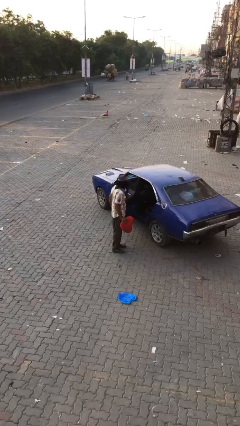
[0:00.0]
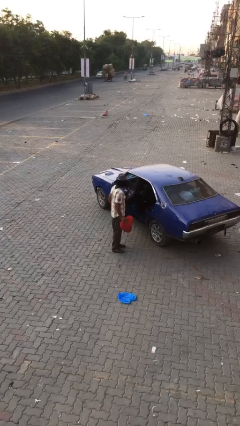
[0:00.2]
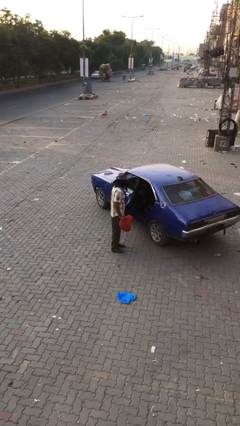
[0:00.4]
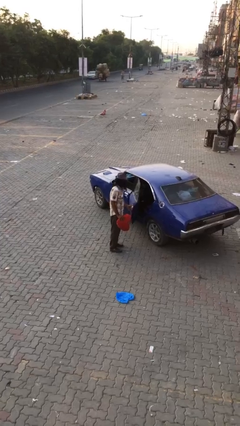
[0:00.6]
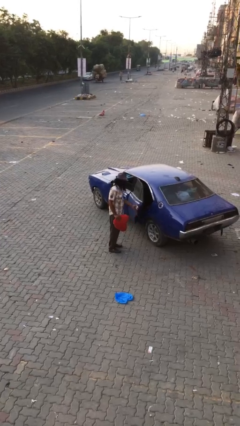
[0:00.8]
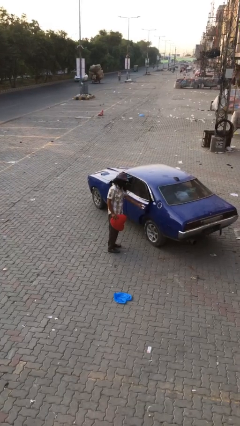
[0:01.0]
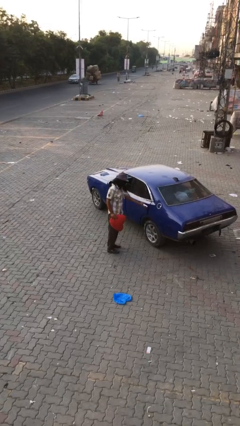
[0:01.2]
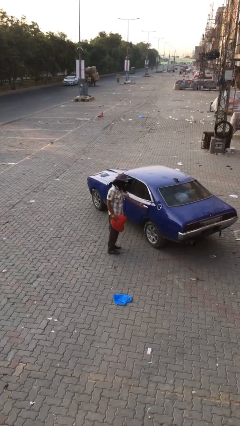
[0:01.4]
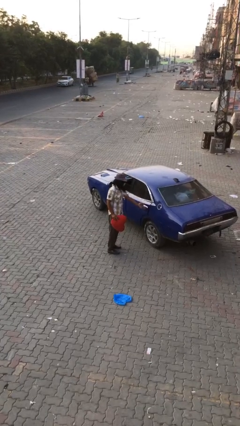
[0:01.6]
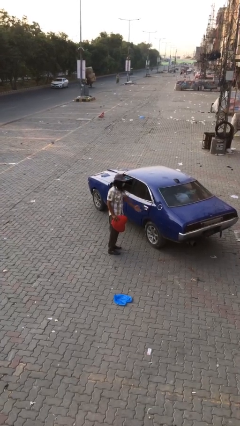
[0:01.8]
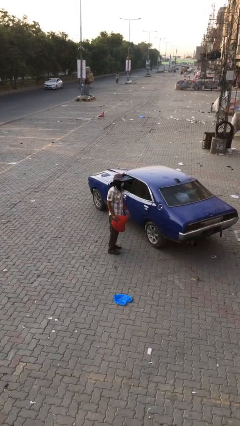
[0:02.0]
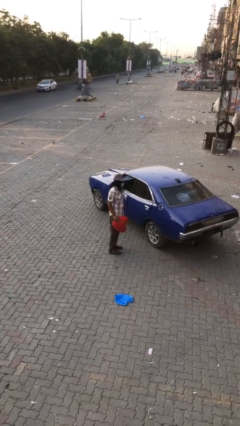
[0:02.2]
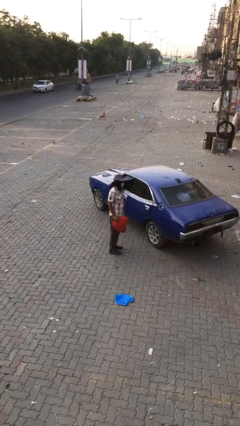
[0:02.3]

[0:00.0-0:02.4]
person closes car door

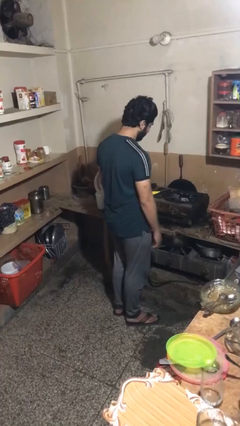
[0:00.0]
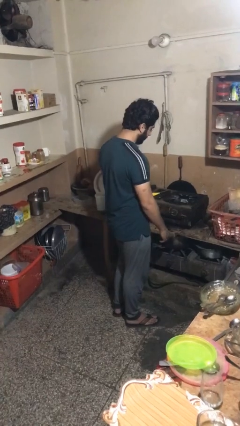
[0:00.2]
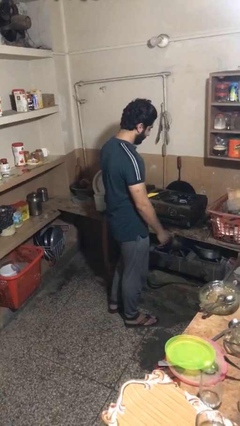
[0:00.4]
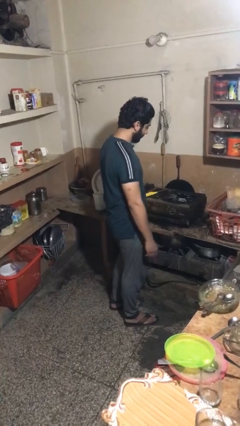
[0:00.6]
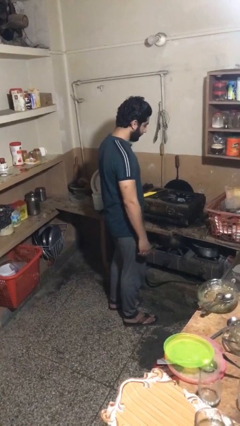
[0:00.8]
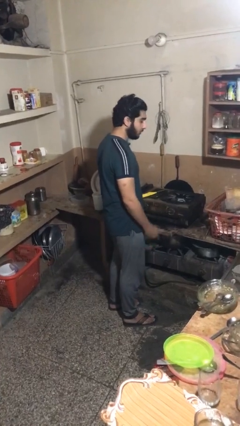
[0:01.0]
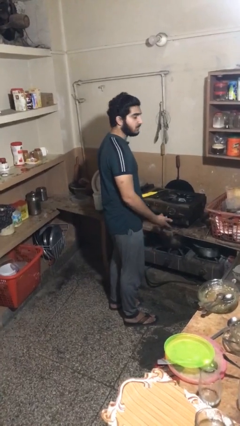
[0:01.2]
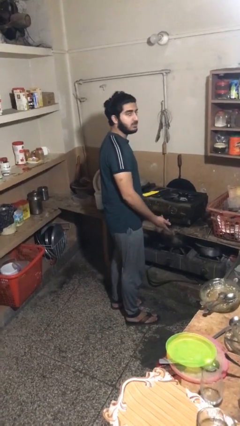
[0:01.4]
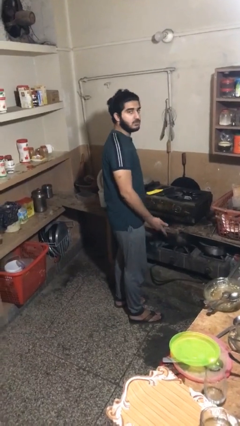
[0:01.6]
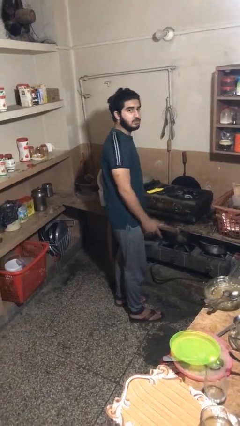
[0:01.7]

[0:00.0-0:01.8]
person turns on stovetop

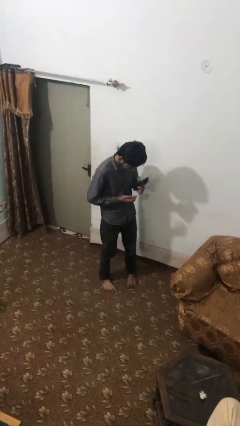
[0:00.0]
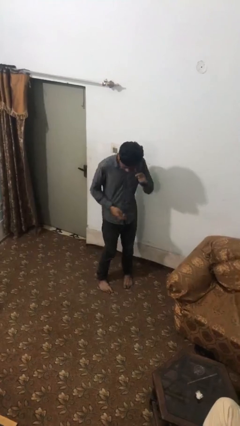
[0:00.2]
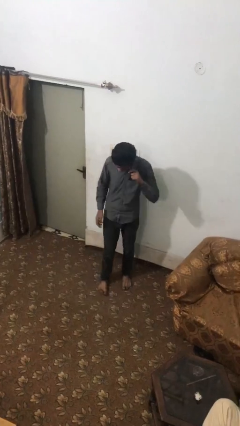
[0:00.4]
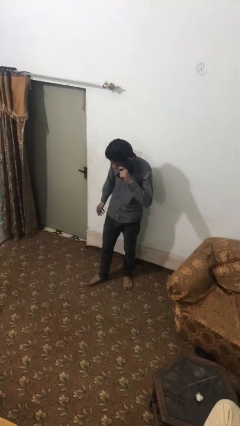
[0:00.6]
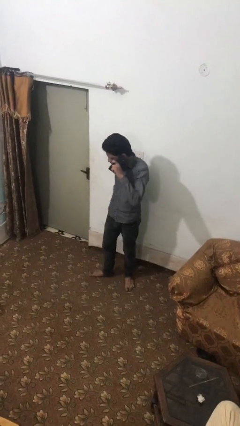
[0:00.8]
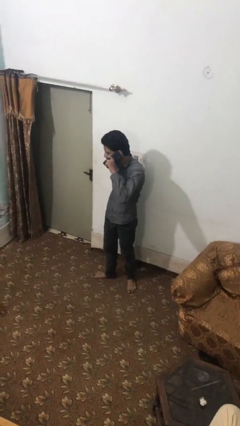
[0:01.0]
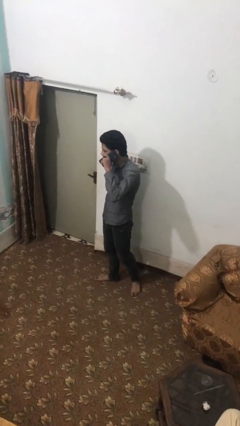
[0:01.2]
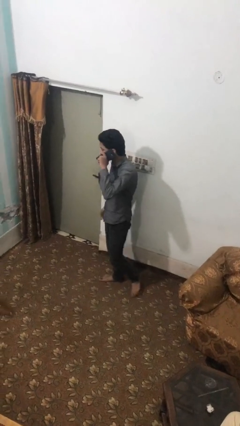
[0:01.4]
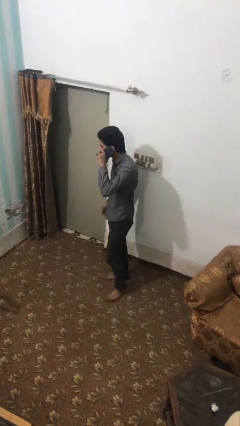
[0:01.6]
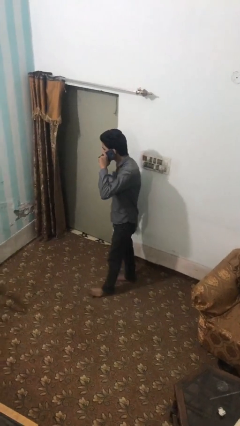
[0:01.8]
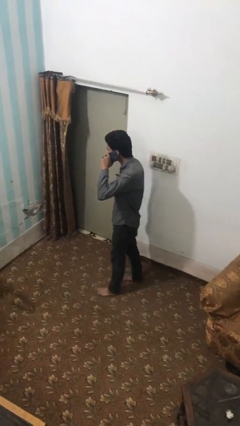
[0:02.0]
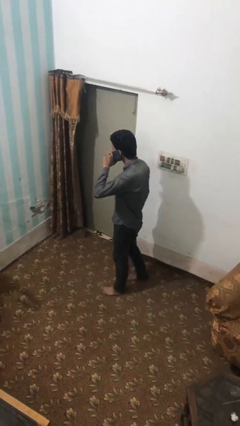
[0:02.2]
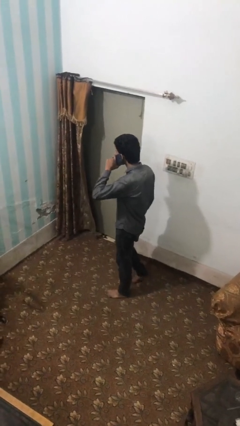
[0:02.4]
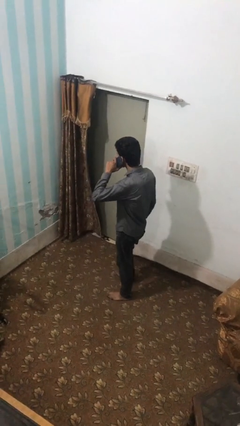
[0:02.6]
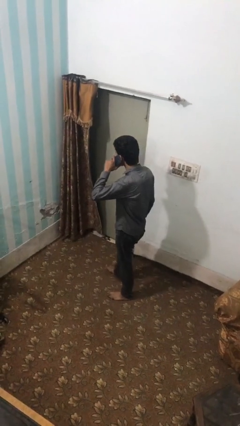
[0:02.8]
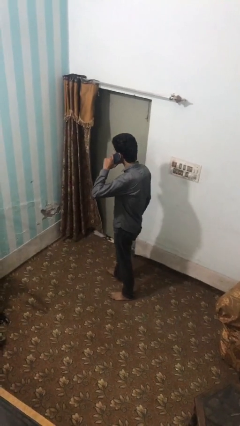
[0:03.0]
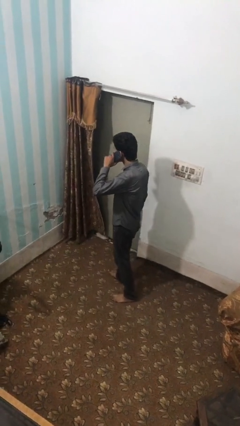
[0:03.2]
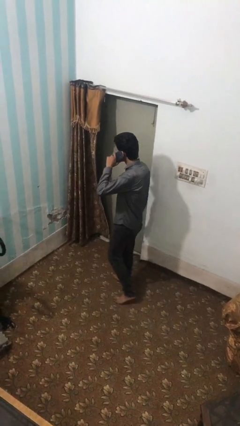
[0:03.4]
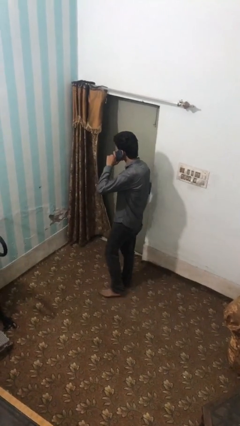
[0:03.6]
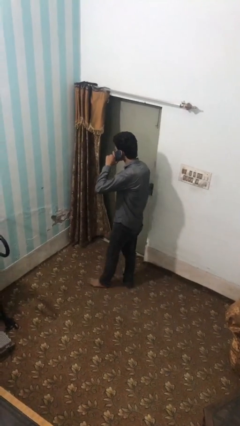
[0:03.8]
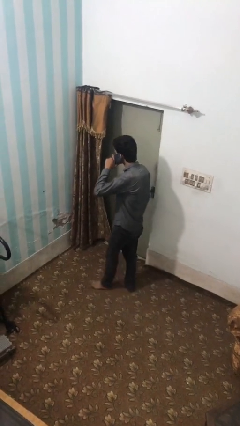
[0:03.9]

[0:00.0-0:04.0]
person talks on phone

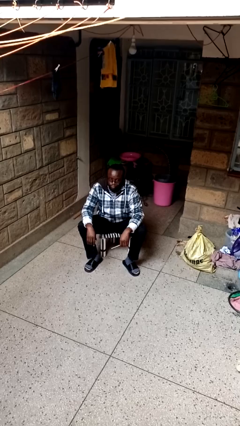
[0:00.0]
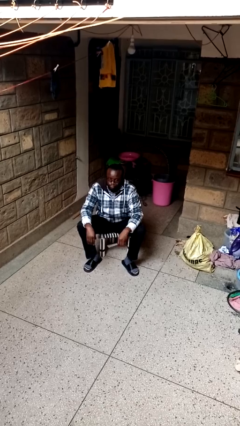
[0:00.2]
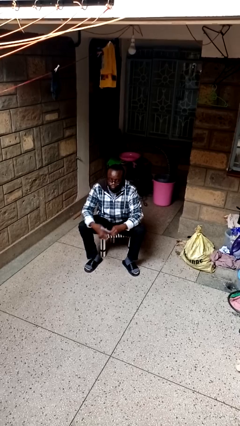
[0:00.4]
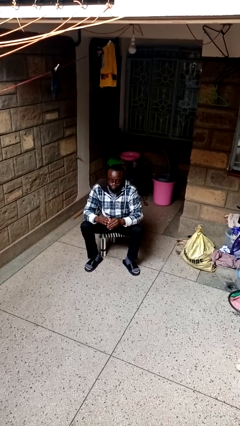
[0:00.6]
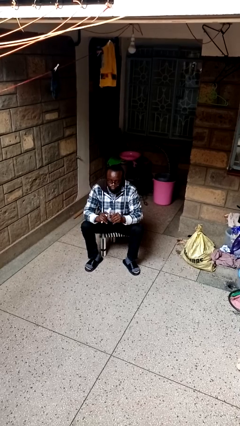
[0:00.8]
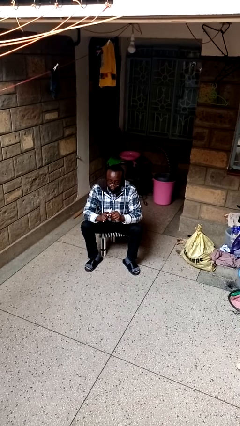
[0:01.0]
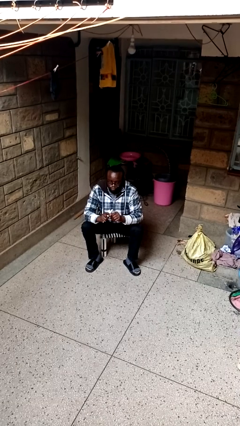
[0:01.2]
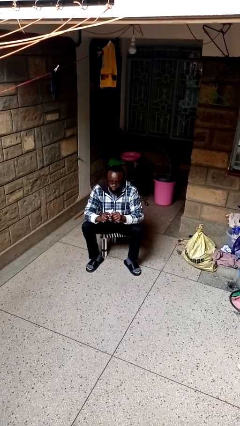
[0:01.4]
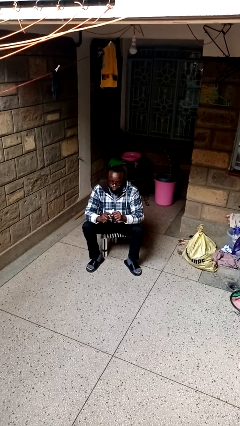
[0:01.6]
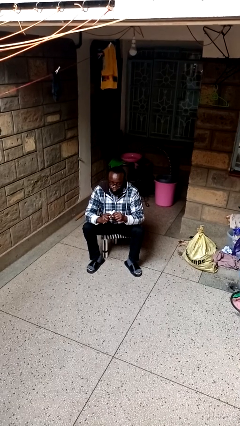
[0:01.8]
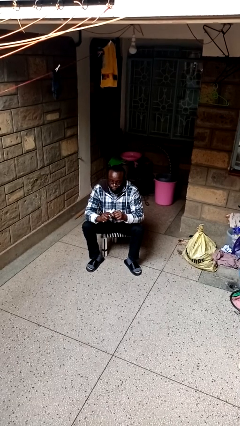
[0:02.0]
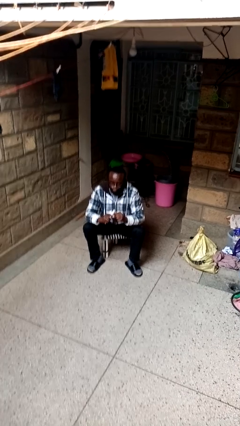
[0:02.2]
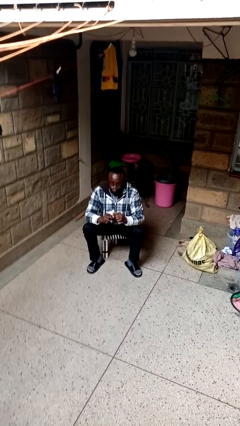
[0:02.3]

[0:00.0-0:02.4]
person files fingernails

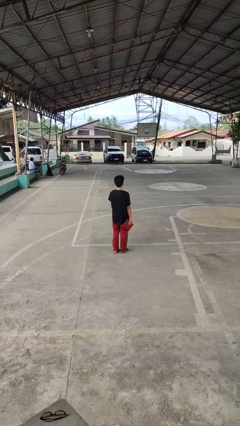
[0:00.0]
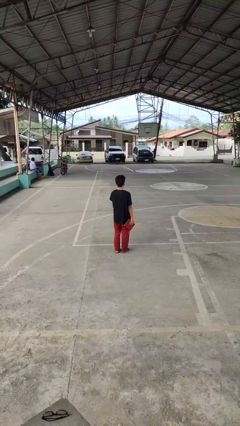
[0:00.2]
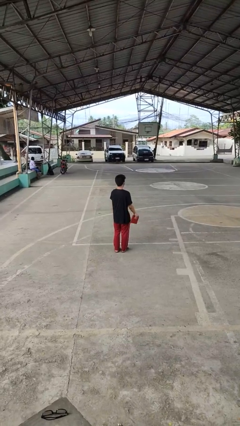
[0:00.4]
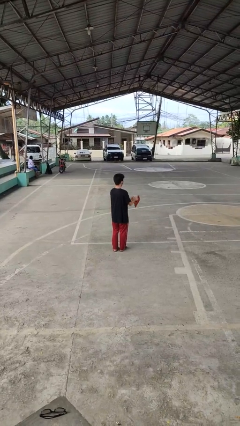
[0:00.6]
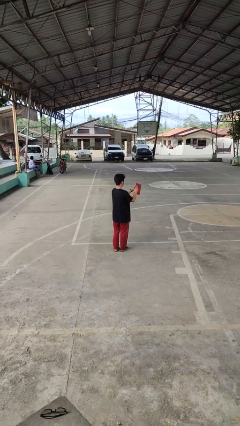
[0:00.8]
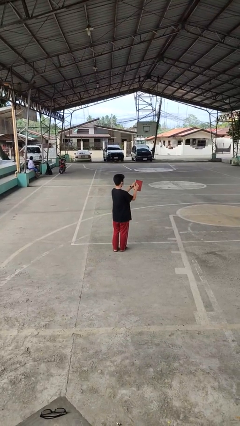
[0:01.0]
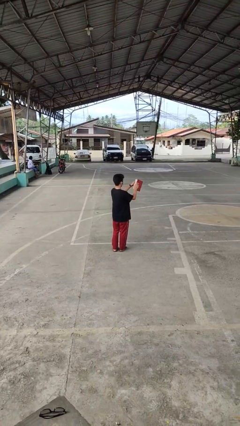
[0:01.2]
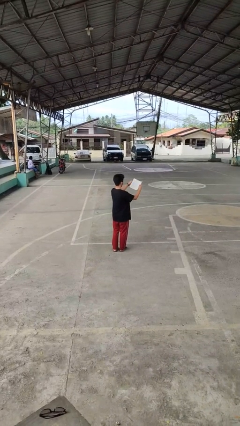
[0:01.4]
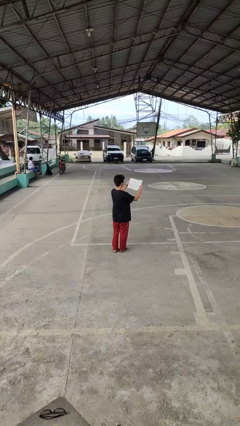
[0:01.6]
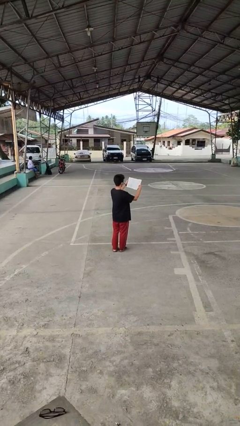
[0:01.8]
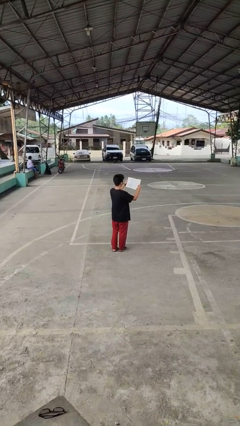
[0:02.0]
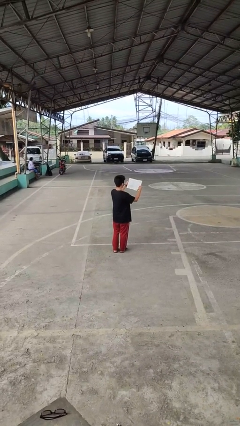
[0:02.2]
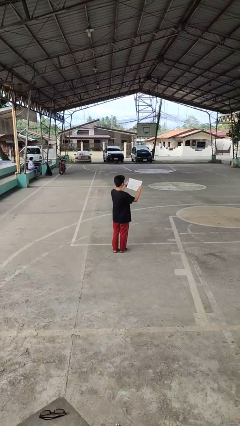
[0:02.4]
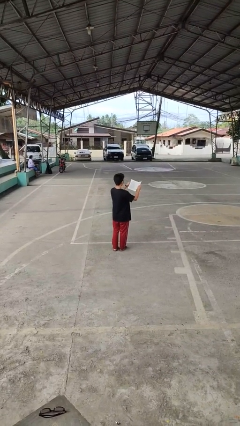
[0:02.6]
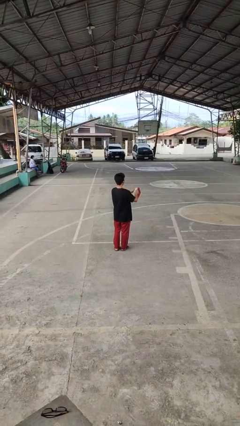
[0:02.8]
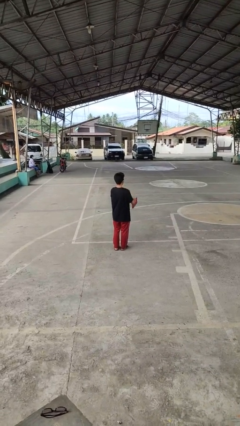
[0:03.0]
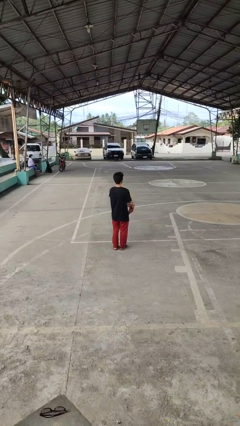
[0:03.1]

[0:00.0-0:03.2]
person reads book

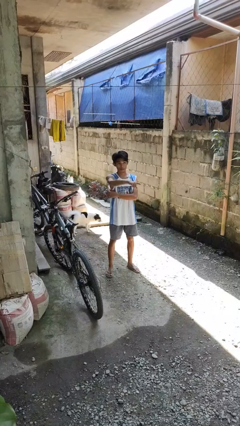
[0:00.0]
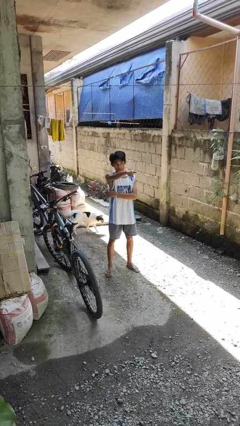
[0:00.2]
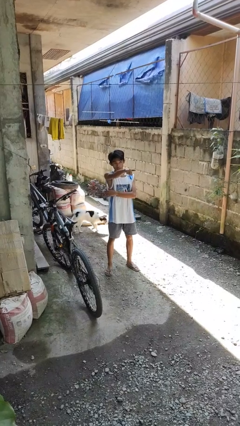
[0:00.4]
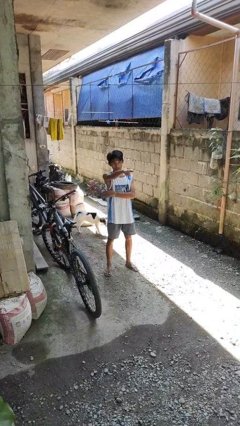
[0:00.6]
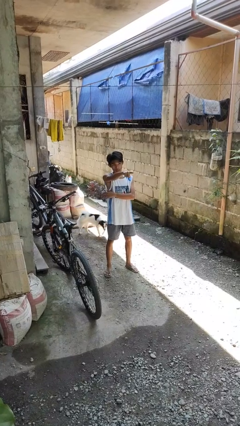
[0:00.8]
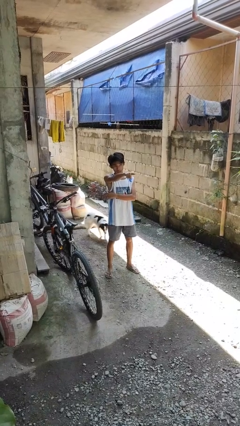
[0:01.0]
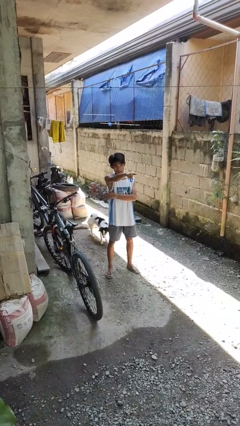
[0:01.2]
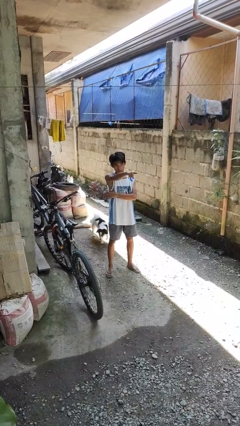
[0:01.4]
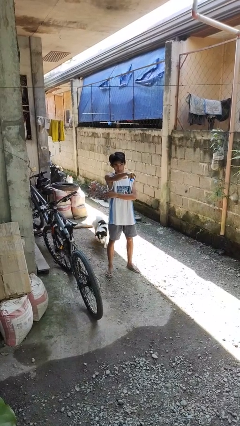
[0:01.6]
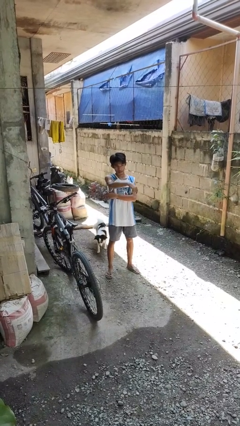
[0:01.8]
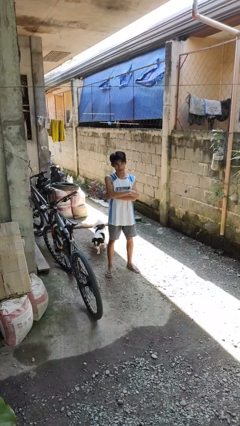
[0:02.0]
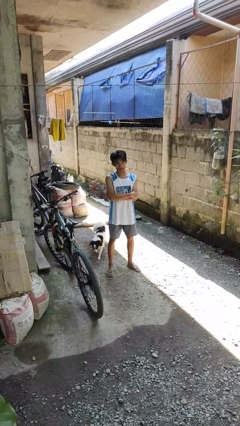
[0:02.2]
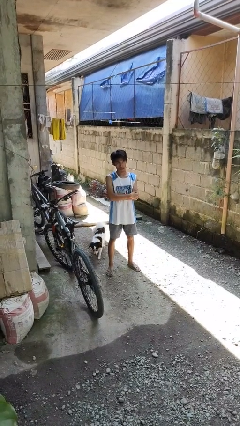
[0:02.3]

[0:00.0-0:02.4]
person points at person

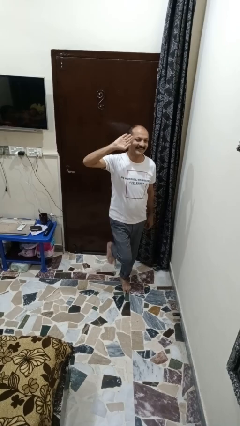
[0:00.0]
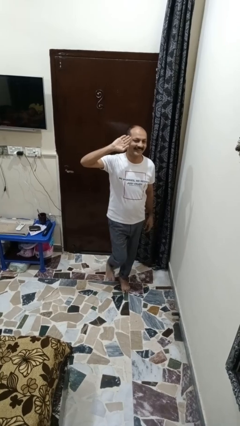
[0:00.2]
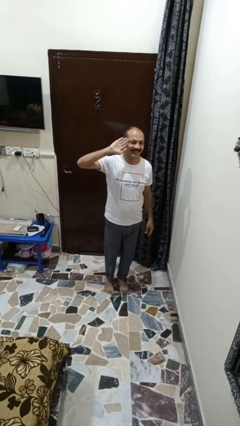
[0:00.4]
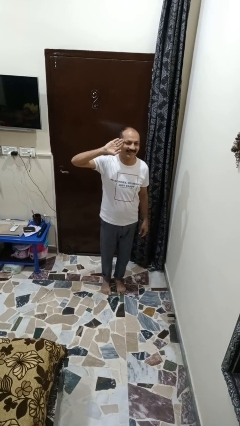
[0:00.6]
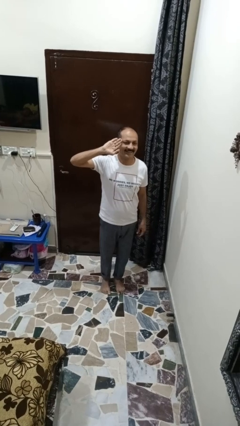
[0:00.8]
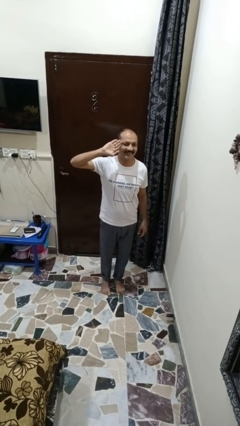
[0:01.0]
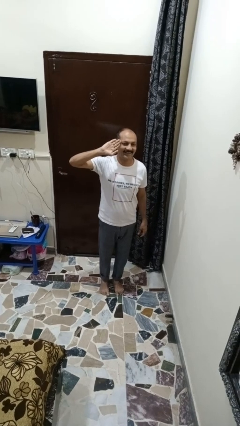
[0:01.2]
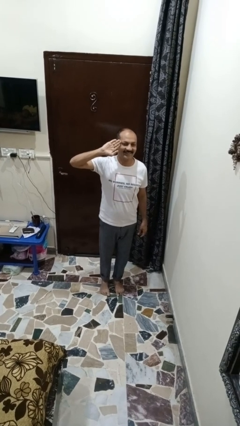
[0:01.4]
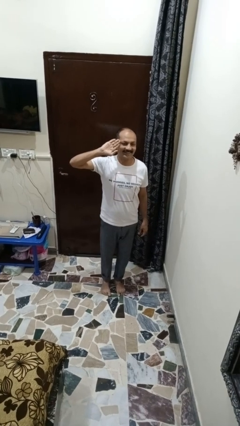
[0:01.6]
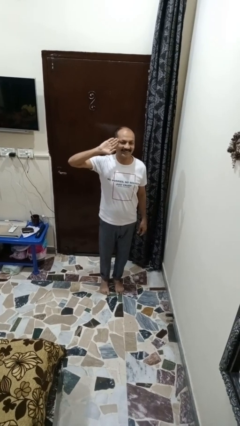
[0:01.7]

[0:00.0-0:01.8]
person salutes
